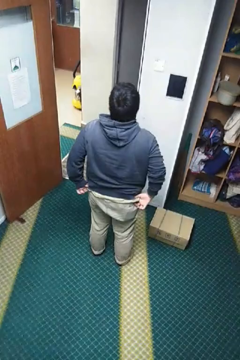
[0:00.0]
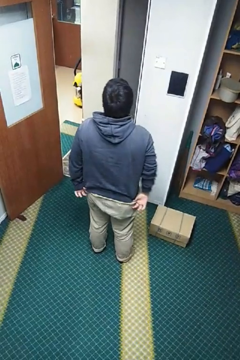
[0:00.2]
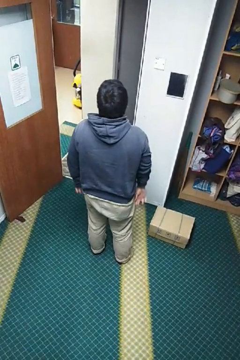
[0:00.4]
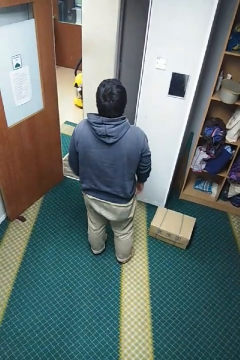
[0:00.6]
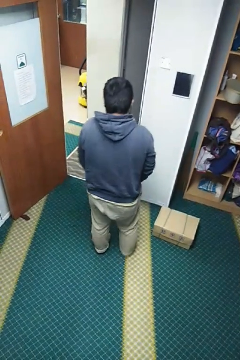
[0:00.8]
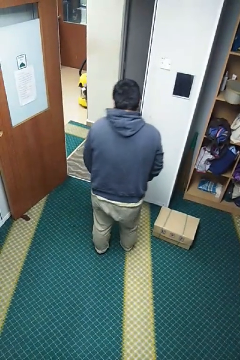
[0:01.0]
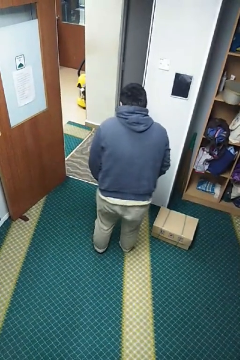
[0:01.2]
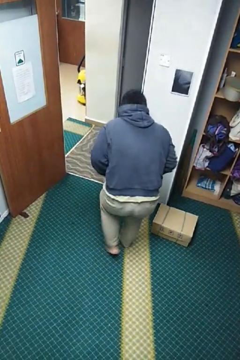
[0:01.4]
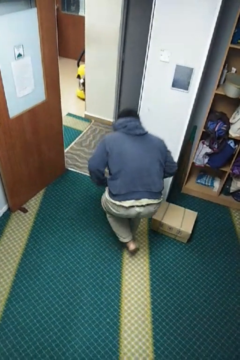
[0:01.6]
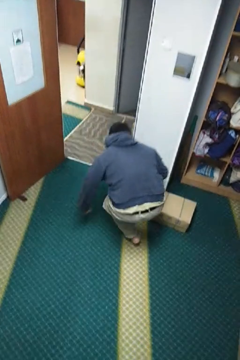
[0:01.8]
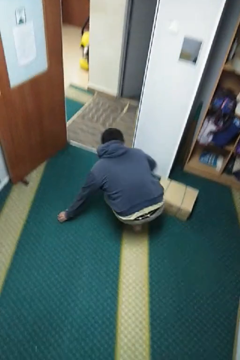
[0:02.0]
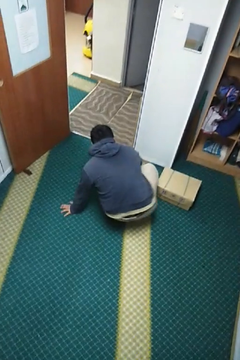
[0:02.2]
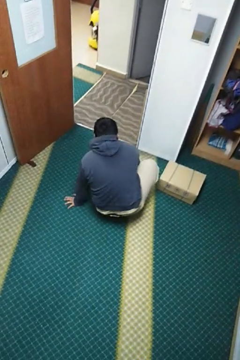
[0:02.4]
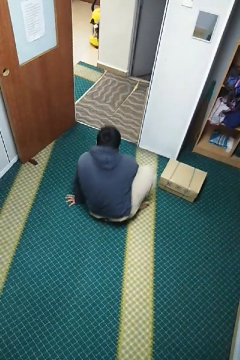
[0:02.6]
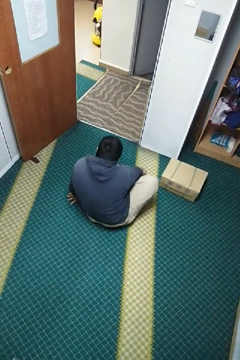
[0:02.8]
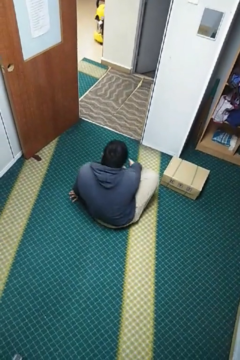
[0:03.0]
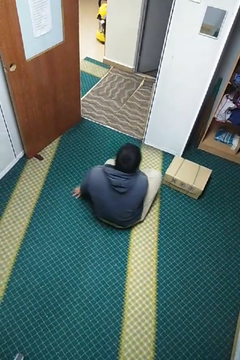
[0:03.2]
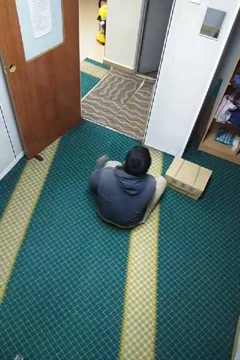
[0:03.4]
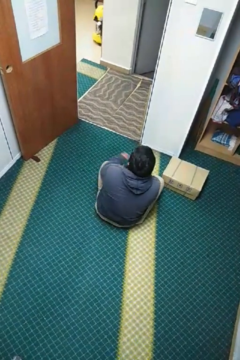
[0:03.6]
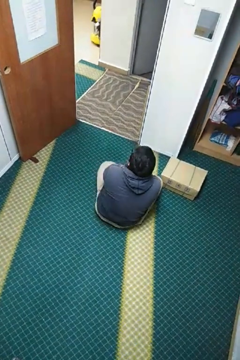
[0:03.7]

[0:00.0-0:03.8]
person sits crisscross

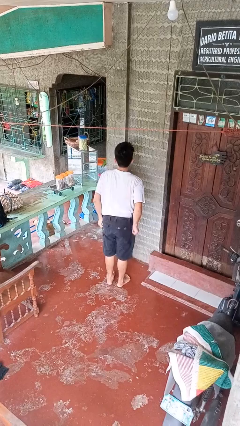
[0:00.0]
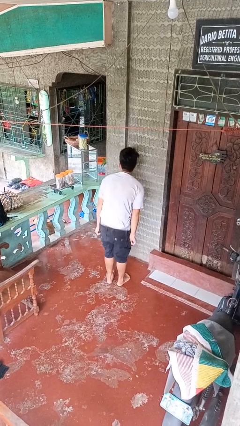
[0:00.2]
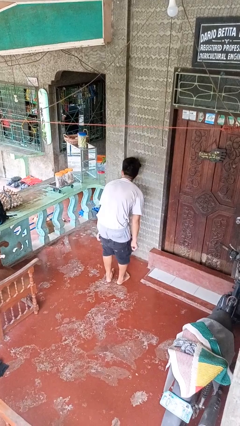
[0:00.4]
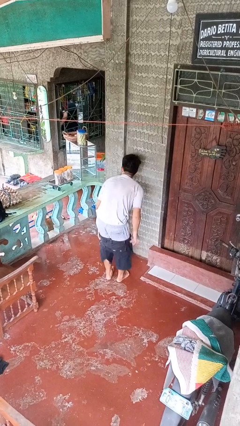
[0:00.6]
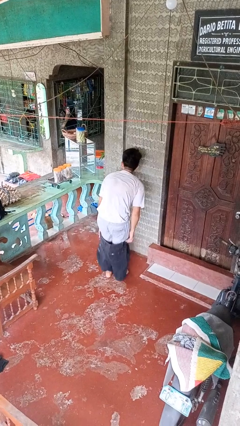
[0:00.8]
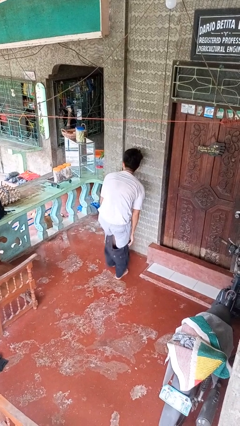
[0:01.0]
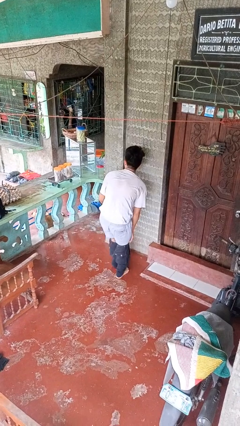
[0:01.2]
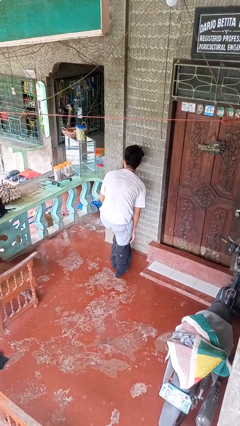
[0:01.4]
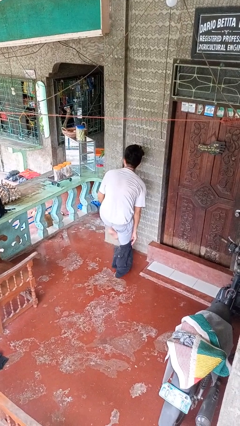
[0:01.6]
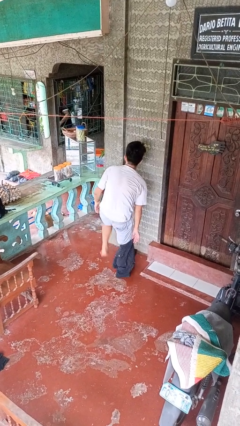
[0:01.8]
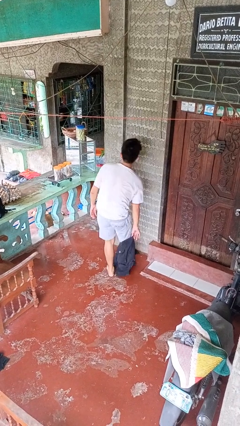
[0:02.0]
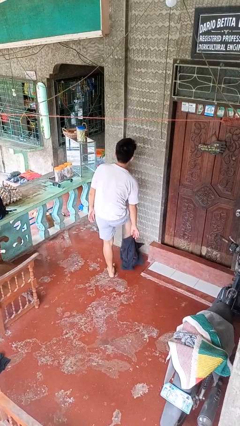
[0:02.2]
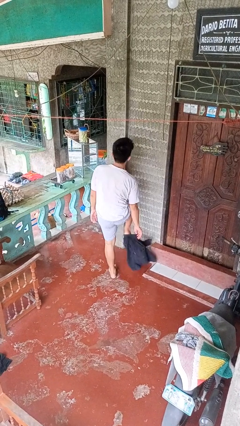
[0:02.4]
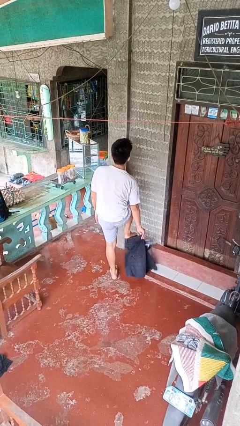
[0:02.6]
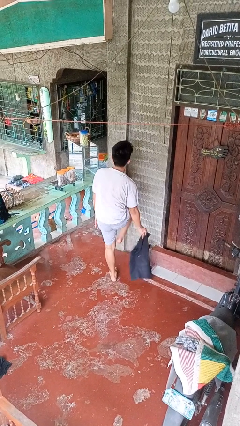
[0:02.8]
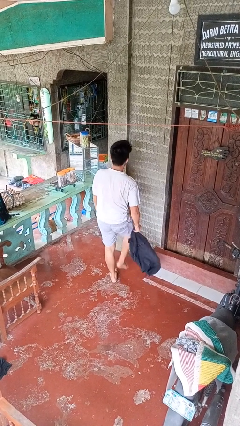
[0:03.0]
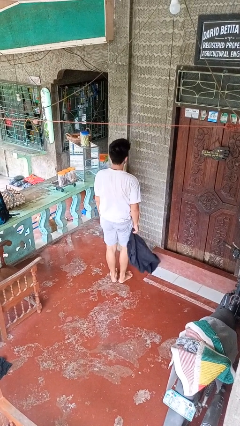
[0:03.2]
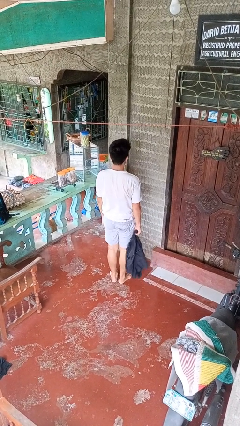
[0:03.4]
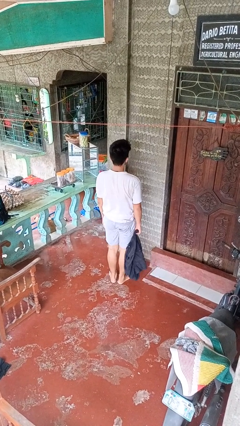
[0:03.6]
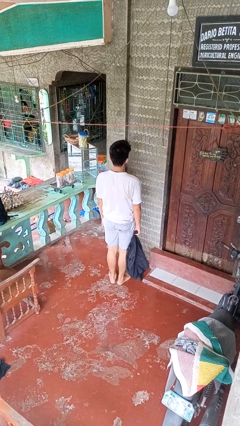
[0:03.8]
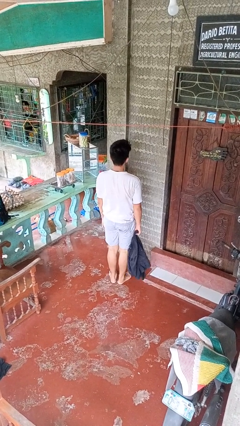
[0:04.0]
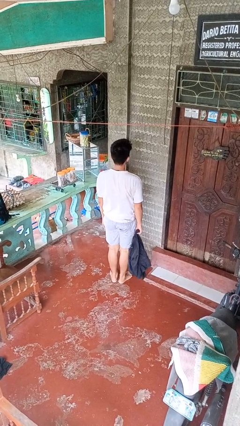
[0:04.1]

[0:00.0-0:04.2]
person takes off pants

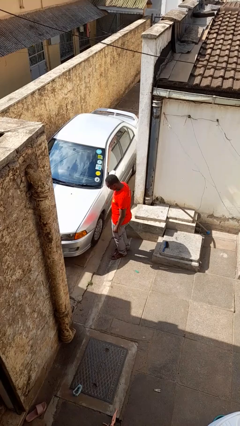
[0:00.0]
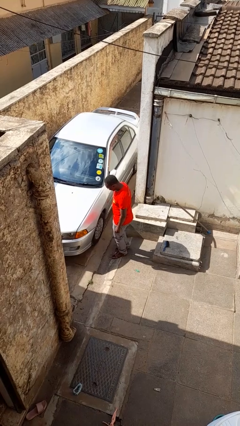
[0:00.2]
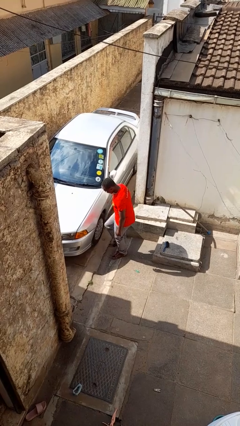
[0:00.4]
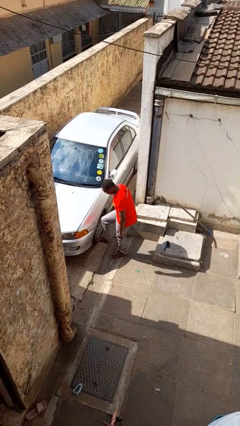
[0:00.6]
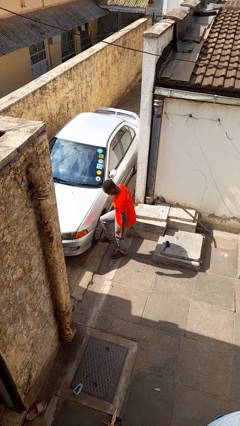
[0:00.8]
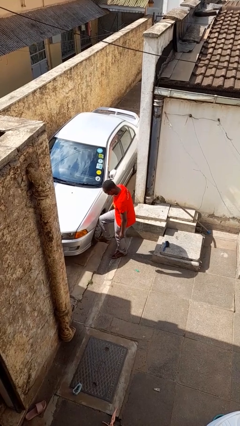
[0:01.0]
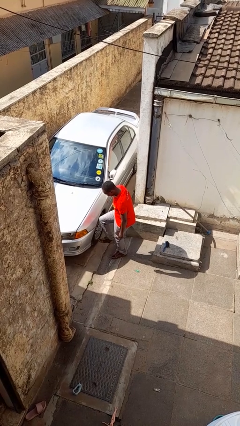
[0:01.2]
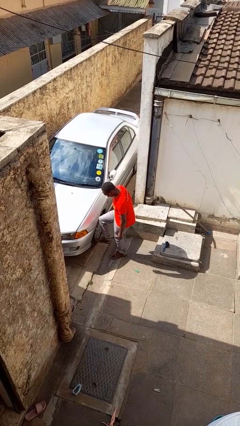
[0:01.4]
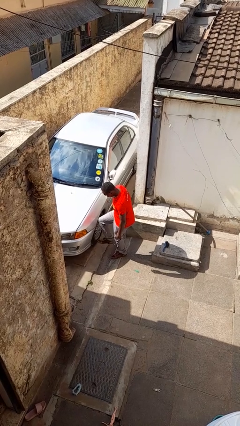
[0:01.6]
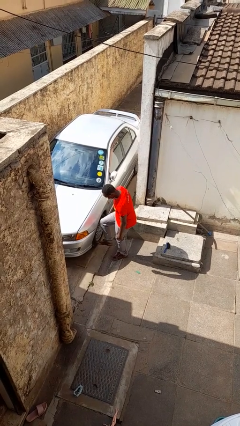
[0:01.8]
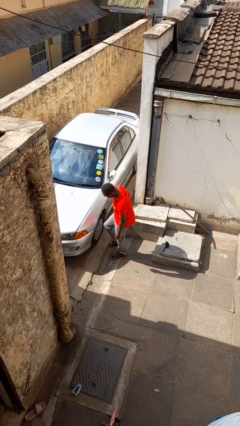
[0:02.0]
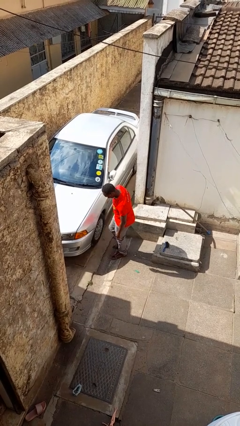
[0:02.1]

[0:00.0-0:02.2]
person kicks car tires

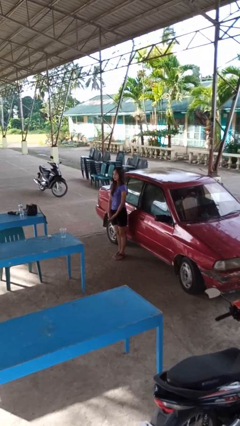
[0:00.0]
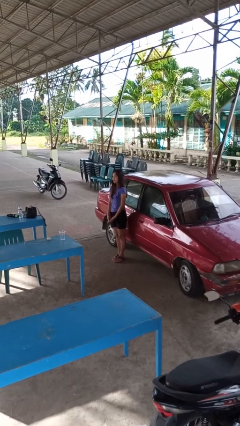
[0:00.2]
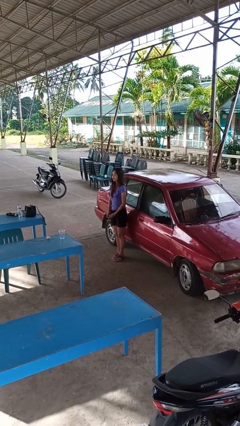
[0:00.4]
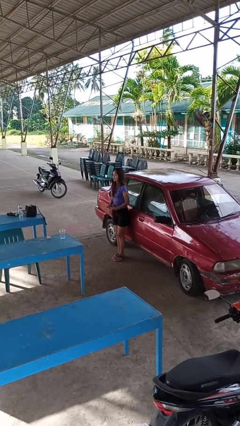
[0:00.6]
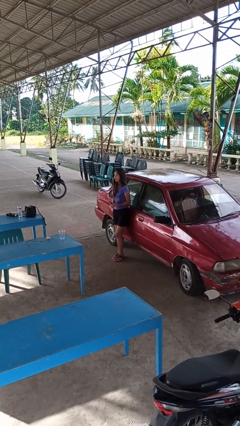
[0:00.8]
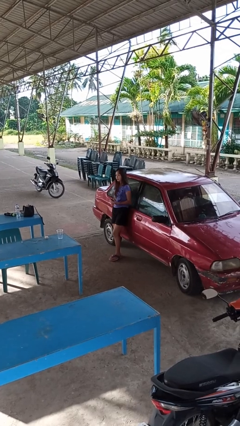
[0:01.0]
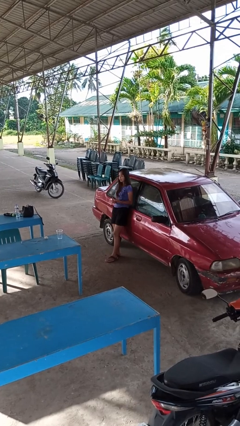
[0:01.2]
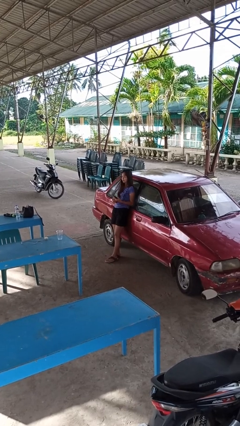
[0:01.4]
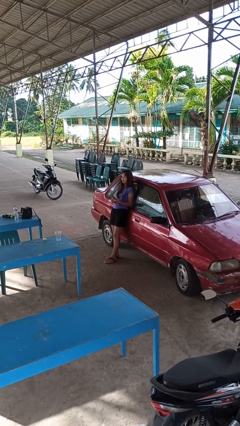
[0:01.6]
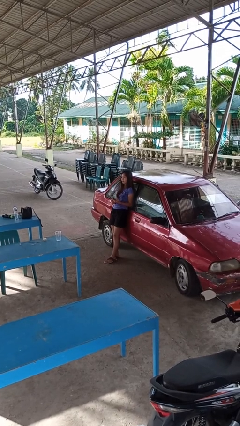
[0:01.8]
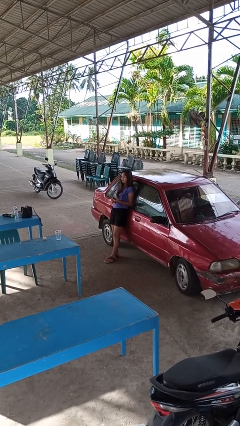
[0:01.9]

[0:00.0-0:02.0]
person leans against car

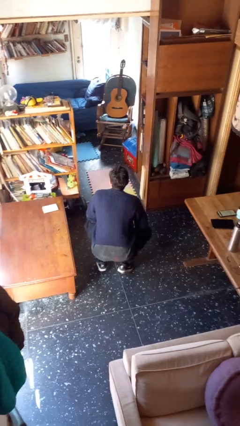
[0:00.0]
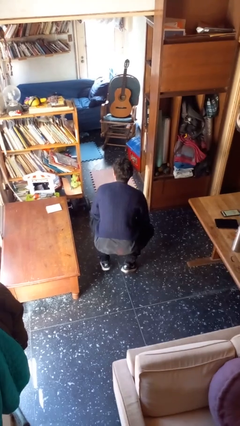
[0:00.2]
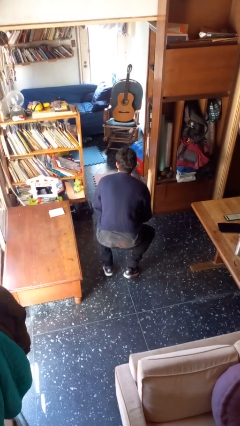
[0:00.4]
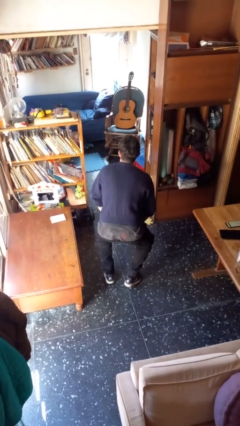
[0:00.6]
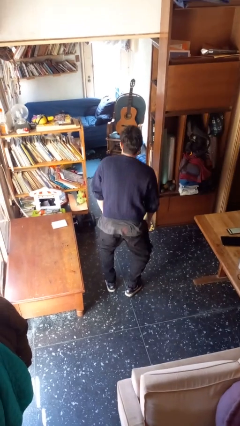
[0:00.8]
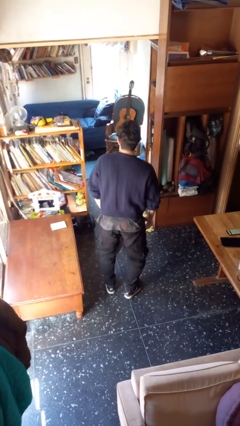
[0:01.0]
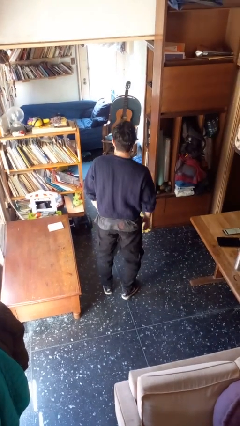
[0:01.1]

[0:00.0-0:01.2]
person stands up

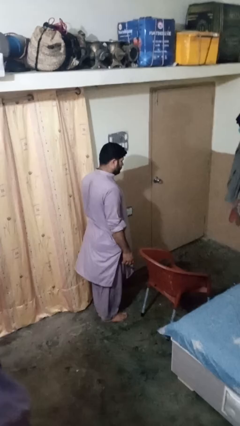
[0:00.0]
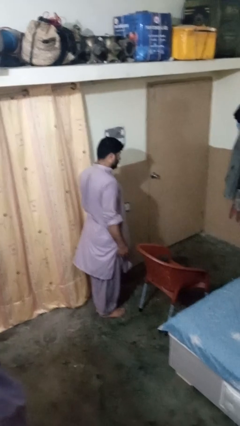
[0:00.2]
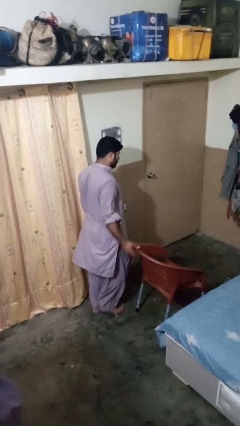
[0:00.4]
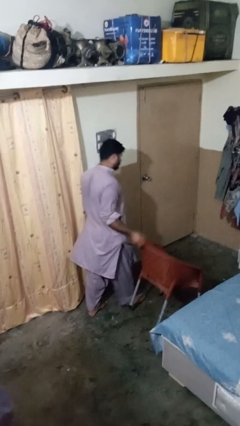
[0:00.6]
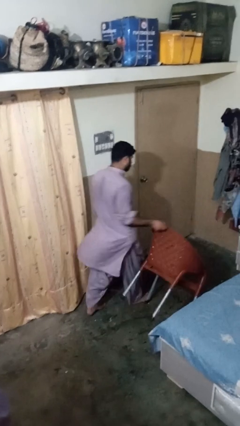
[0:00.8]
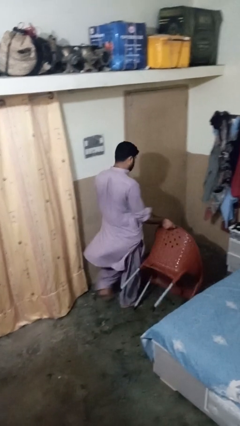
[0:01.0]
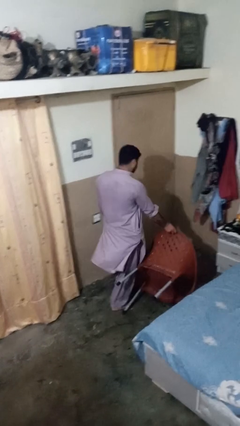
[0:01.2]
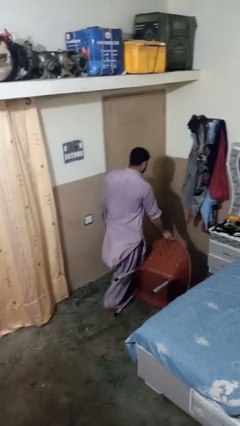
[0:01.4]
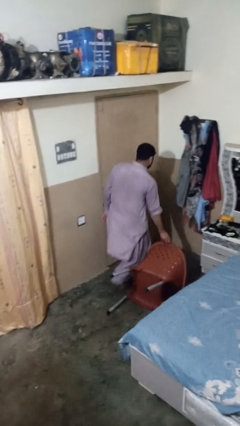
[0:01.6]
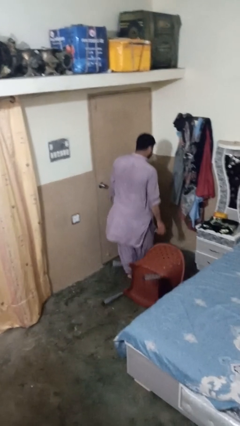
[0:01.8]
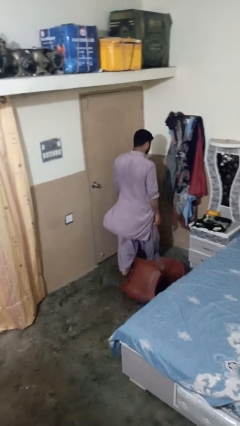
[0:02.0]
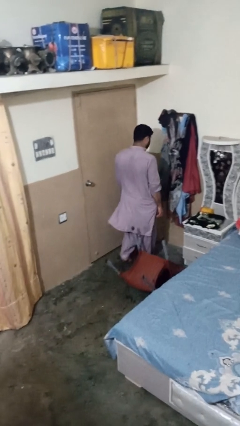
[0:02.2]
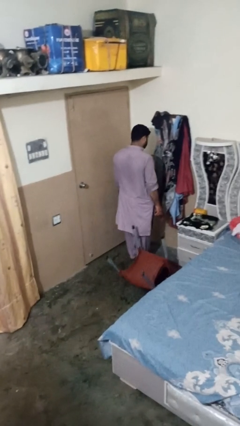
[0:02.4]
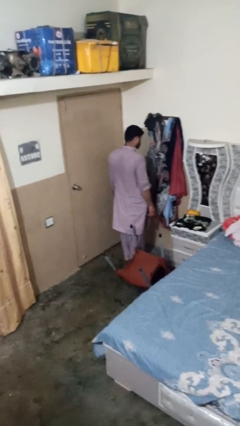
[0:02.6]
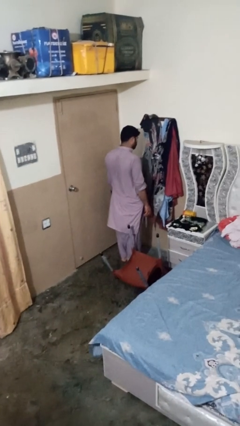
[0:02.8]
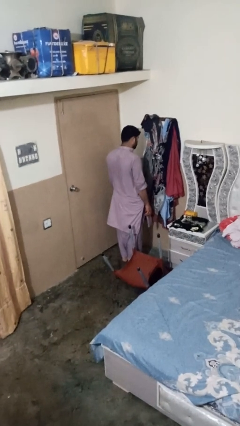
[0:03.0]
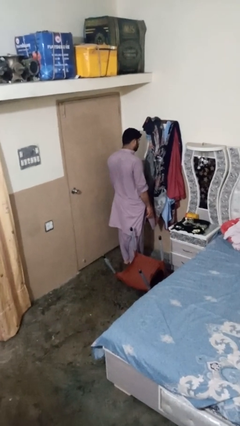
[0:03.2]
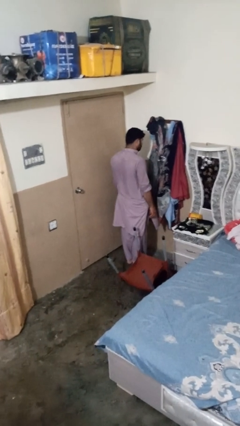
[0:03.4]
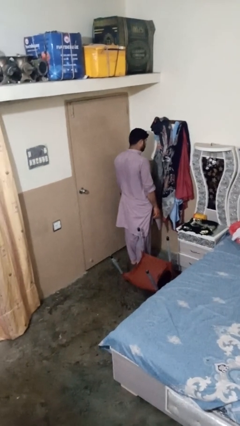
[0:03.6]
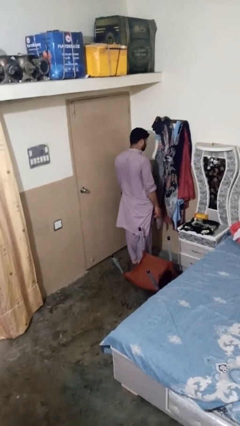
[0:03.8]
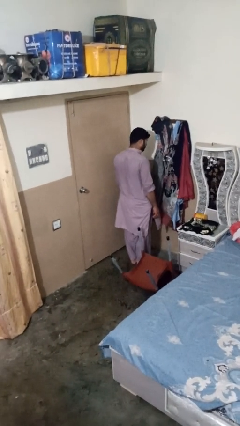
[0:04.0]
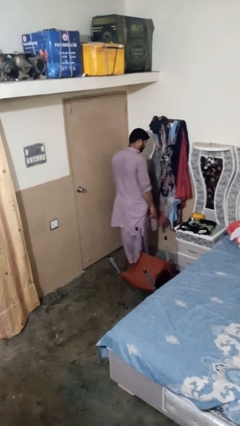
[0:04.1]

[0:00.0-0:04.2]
person knocks over furniture

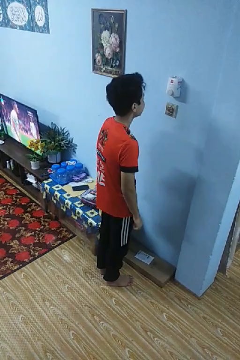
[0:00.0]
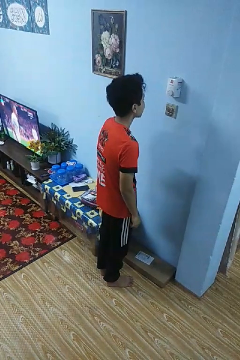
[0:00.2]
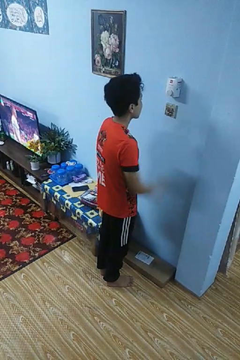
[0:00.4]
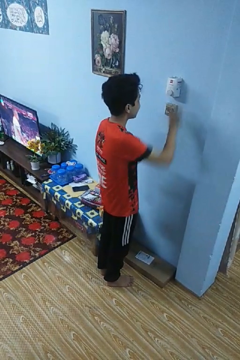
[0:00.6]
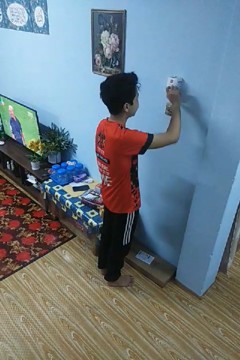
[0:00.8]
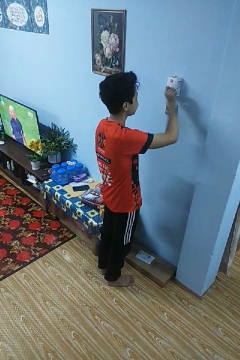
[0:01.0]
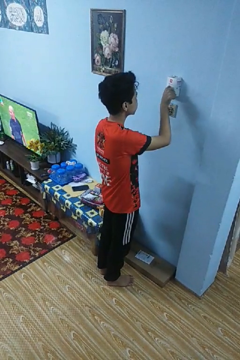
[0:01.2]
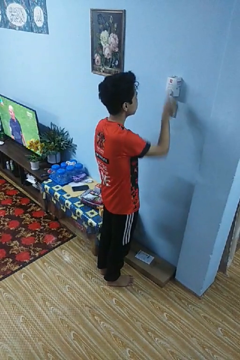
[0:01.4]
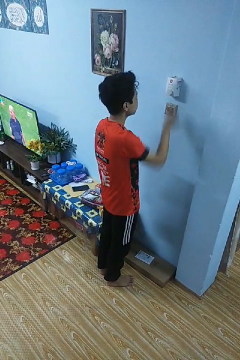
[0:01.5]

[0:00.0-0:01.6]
person adjusts thermostat
